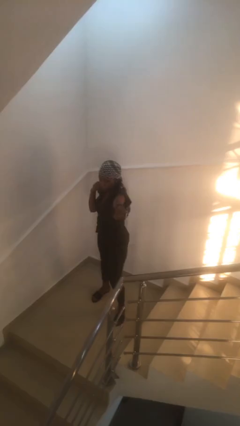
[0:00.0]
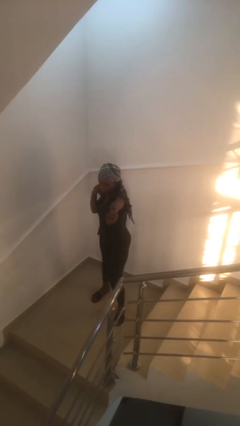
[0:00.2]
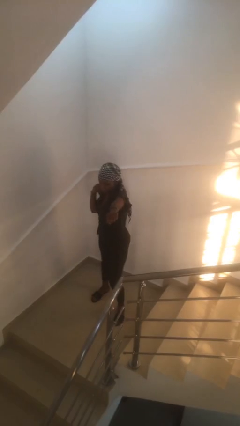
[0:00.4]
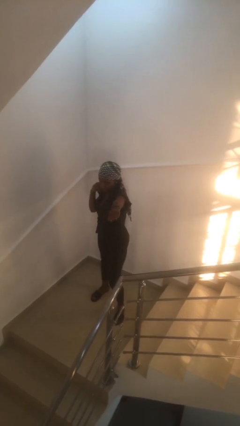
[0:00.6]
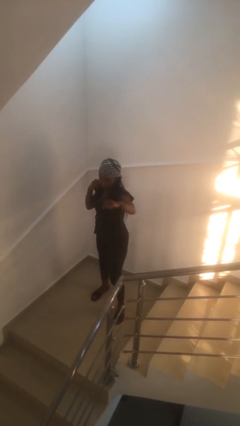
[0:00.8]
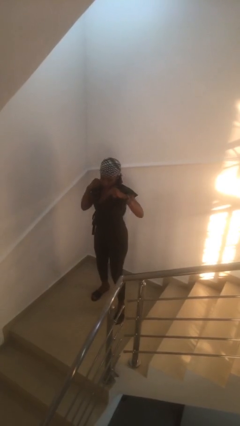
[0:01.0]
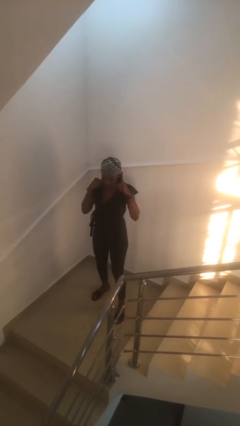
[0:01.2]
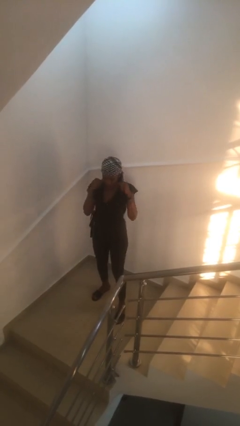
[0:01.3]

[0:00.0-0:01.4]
person punches

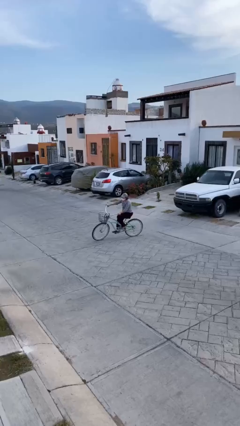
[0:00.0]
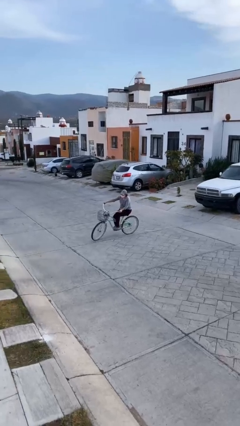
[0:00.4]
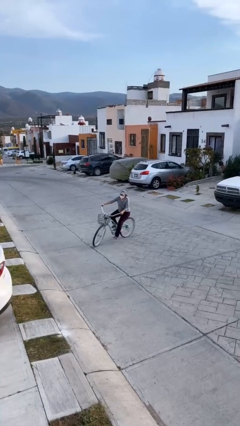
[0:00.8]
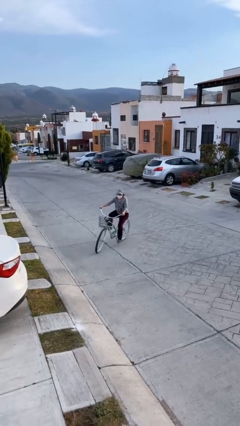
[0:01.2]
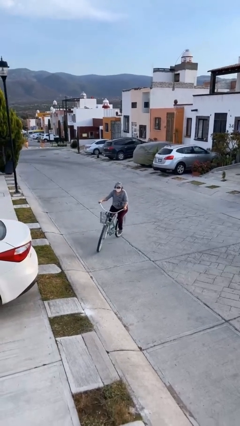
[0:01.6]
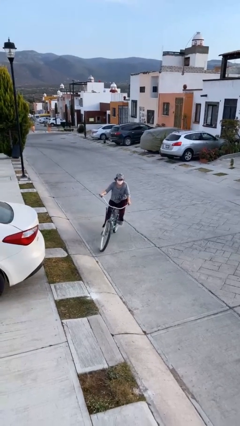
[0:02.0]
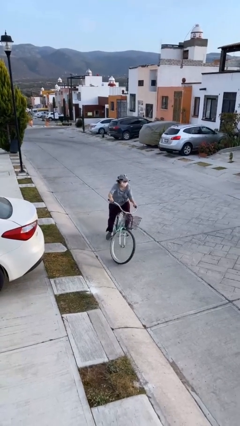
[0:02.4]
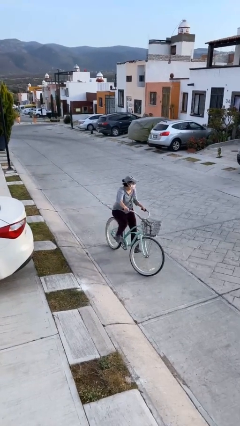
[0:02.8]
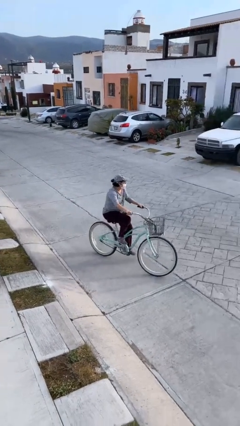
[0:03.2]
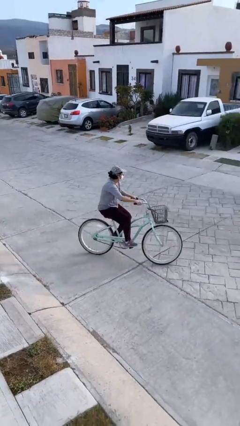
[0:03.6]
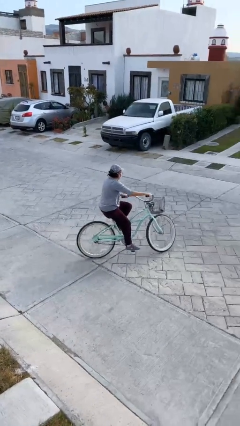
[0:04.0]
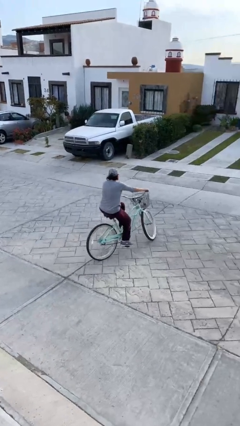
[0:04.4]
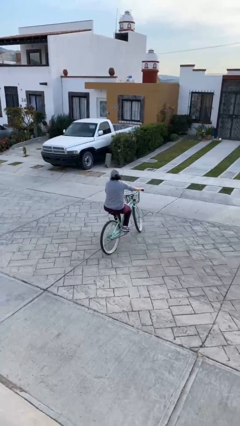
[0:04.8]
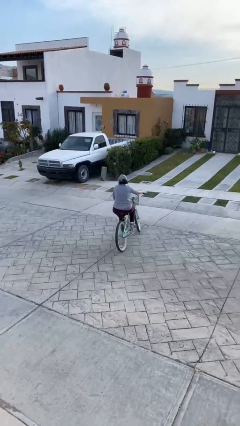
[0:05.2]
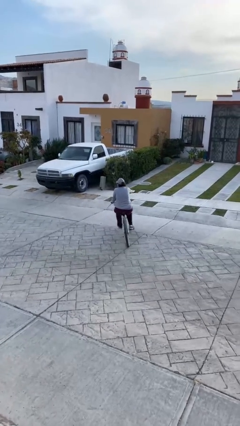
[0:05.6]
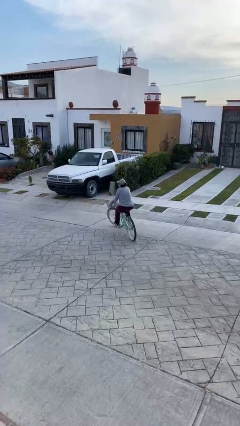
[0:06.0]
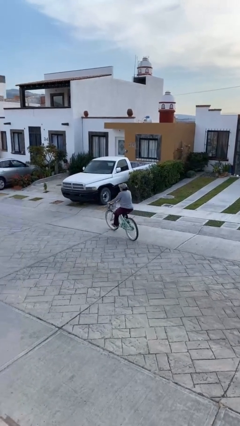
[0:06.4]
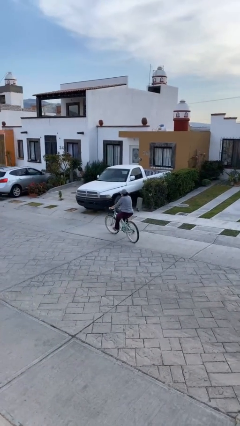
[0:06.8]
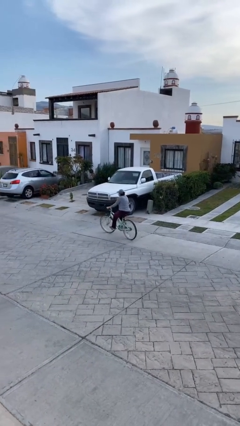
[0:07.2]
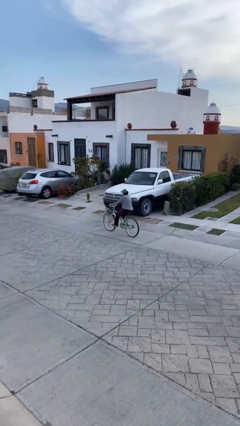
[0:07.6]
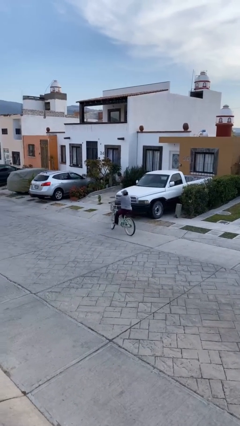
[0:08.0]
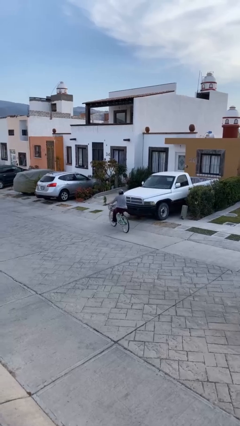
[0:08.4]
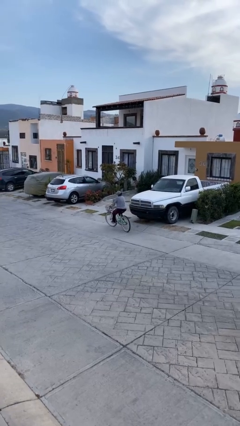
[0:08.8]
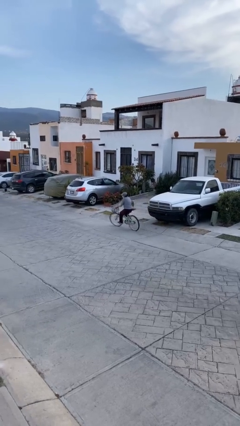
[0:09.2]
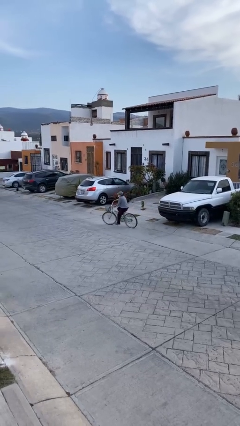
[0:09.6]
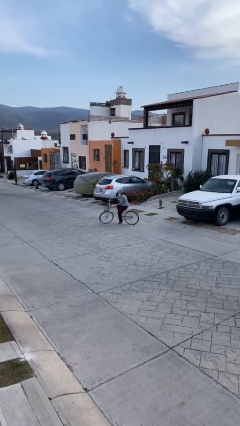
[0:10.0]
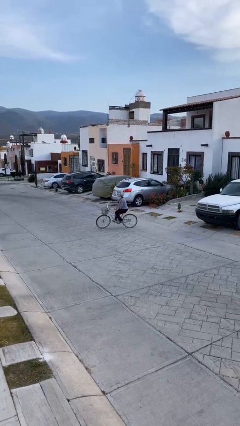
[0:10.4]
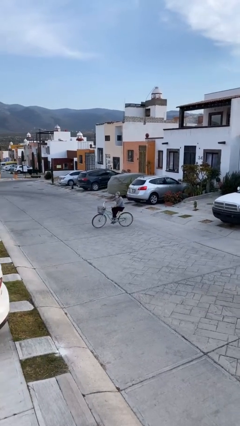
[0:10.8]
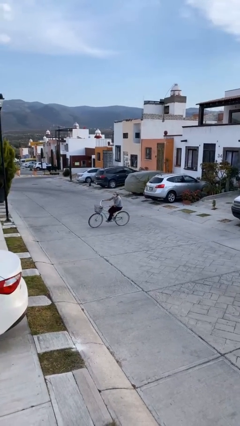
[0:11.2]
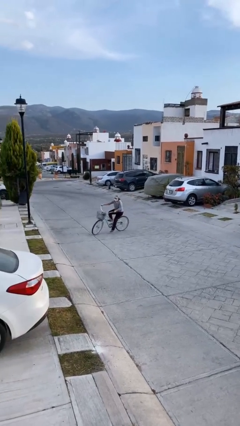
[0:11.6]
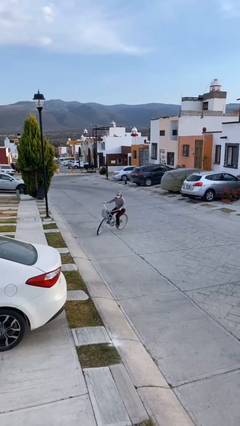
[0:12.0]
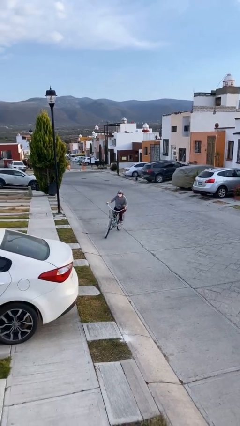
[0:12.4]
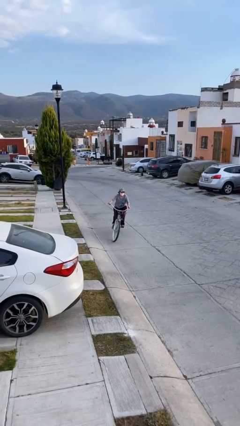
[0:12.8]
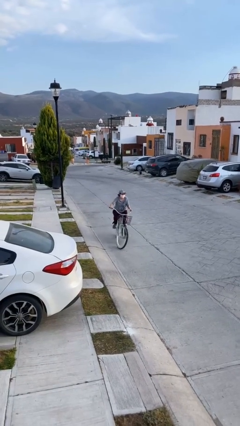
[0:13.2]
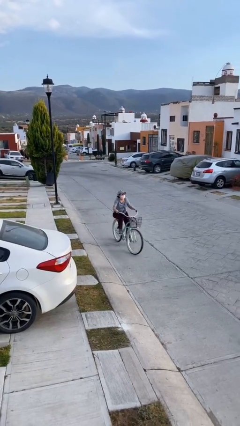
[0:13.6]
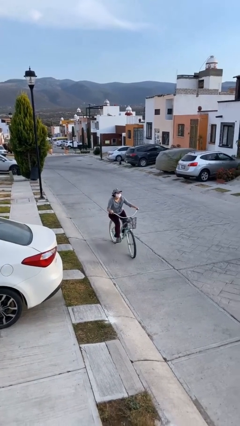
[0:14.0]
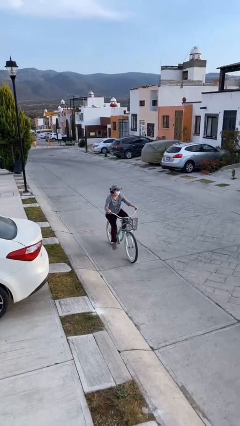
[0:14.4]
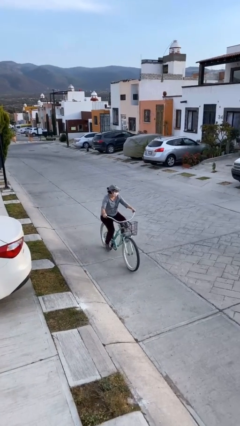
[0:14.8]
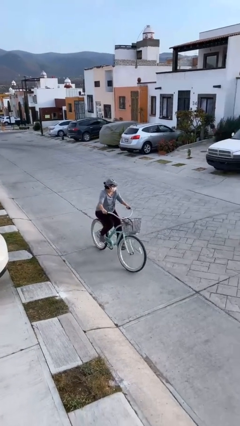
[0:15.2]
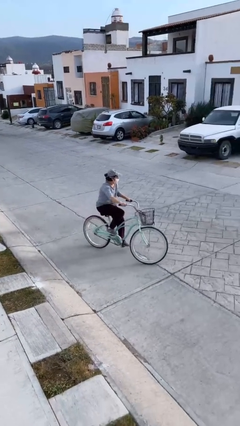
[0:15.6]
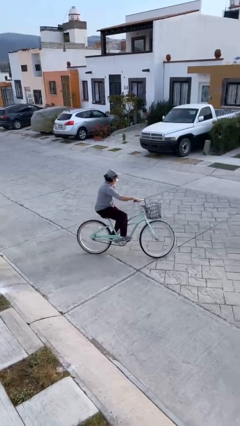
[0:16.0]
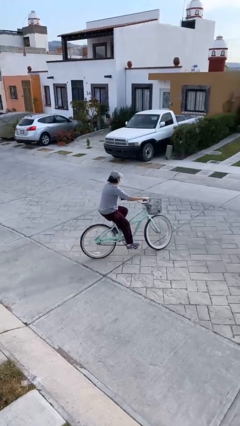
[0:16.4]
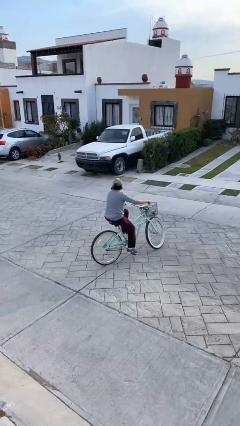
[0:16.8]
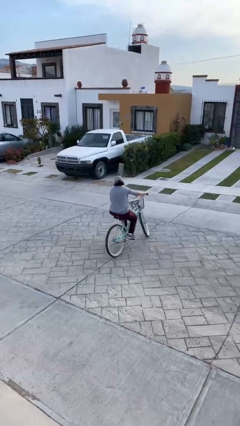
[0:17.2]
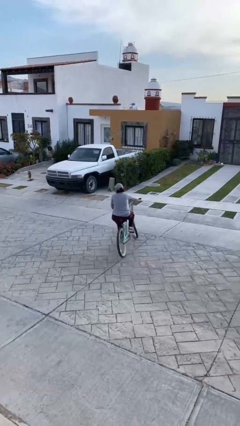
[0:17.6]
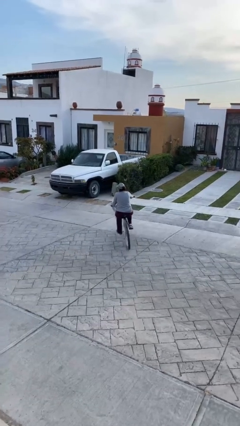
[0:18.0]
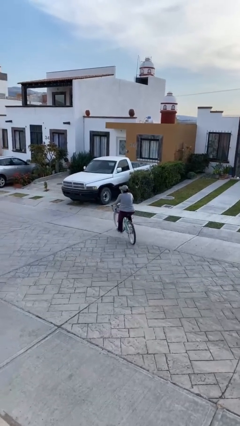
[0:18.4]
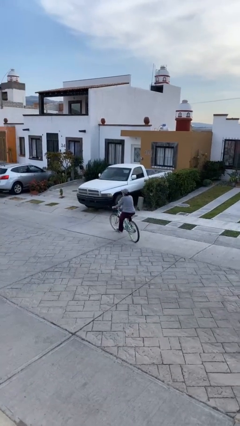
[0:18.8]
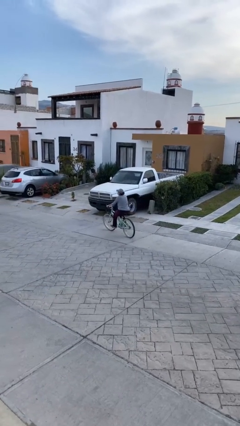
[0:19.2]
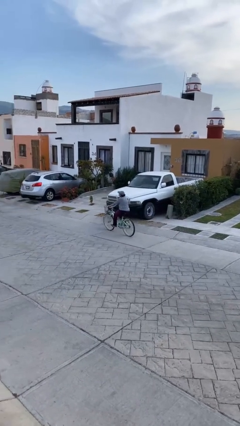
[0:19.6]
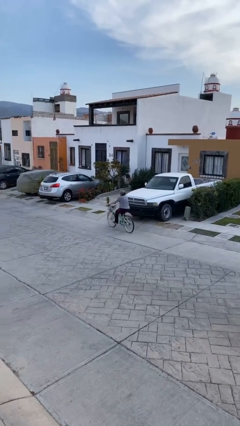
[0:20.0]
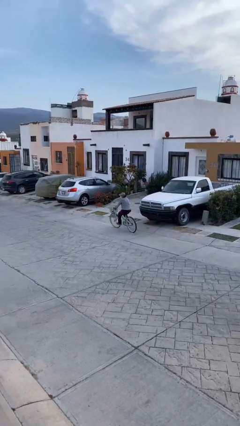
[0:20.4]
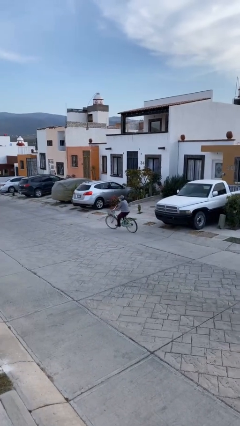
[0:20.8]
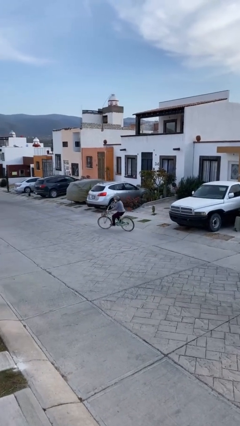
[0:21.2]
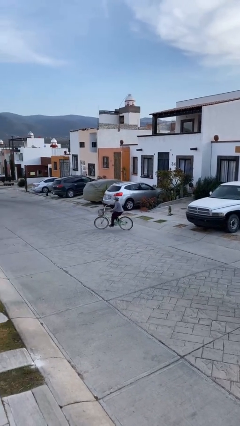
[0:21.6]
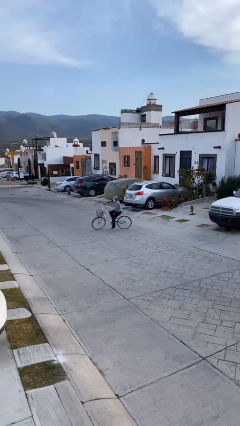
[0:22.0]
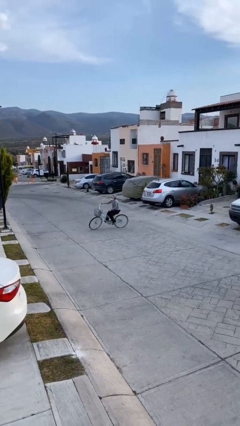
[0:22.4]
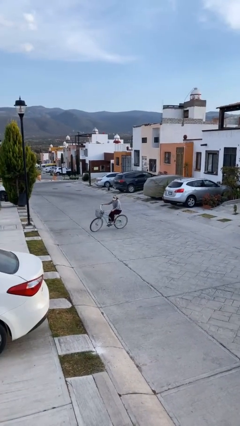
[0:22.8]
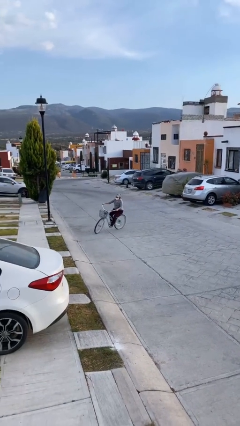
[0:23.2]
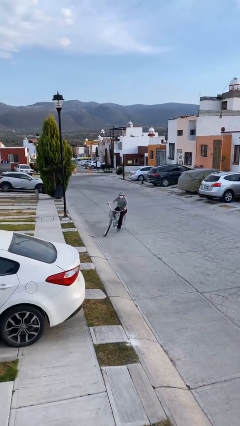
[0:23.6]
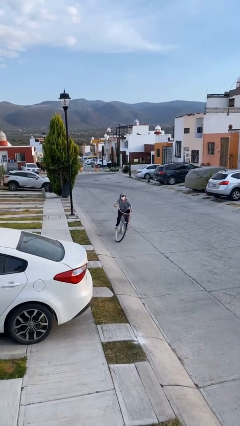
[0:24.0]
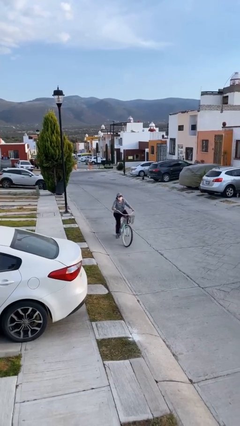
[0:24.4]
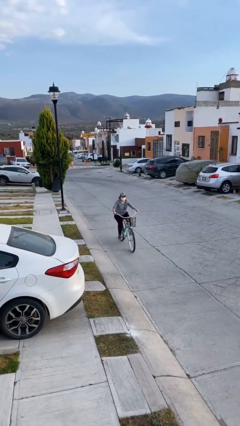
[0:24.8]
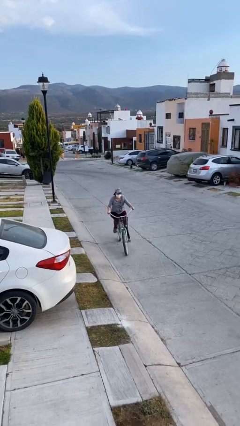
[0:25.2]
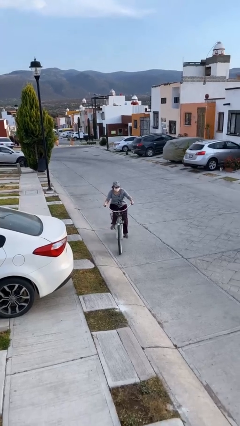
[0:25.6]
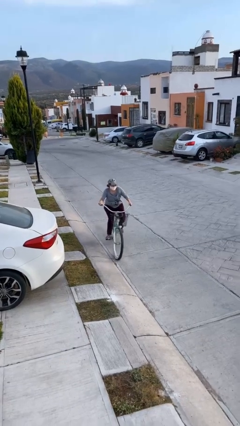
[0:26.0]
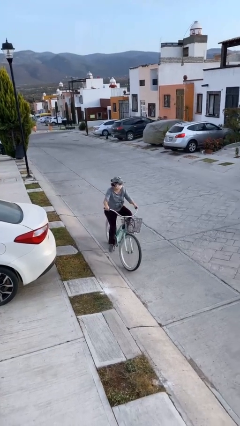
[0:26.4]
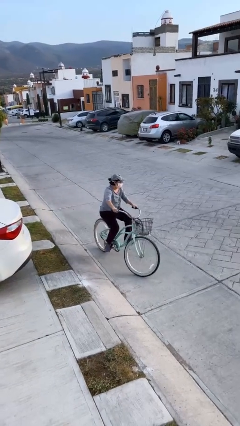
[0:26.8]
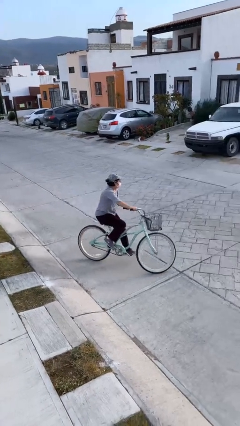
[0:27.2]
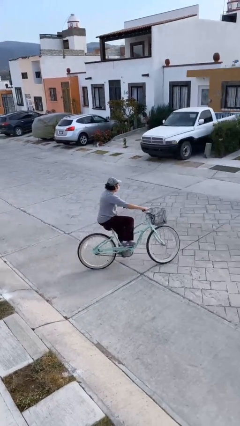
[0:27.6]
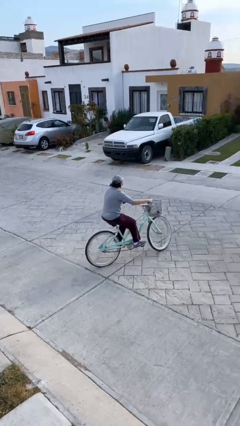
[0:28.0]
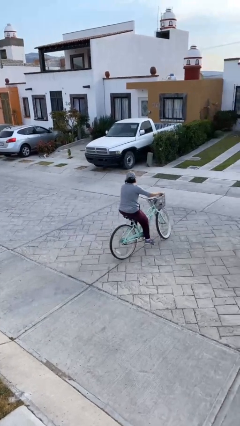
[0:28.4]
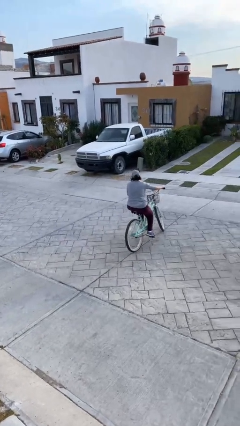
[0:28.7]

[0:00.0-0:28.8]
person rides bicycle

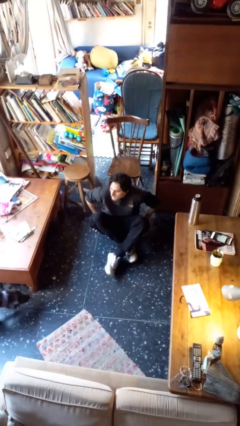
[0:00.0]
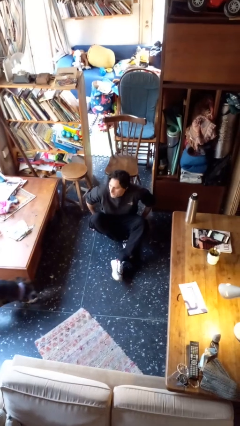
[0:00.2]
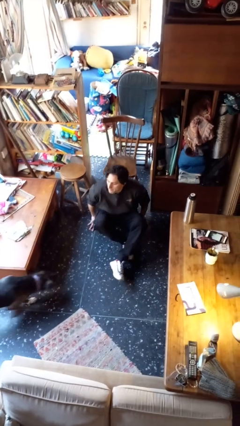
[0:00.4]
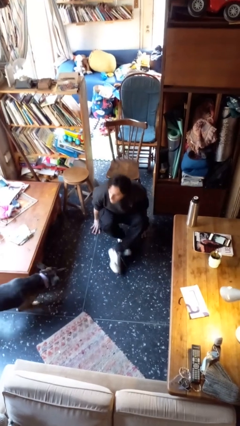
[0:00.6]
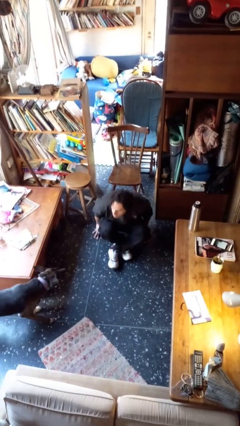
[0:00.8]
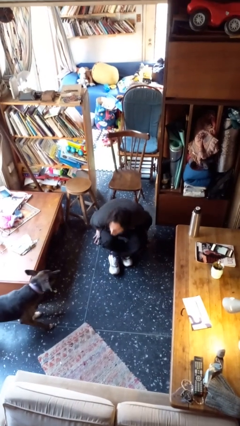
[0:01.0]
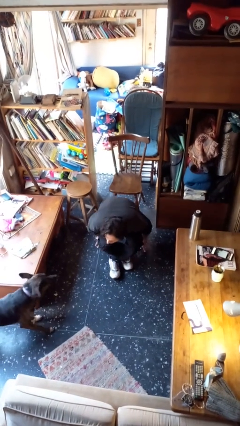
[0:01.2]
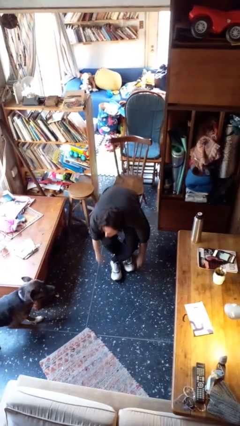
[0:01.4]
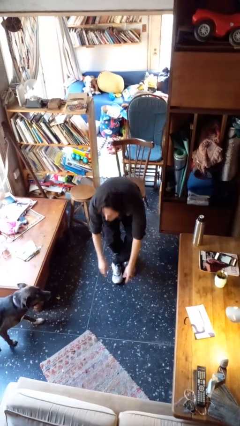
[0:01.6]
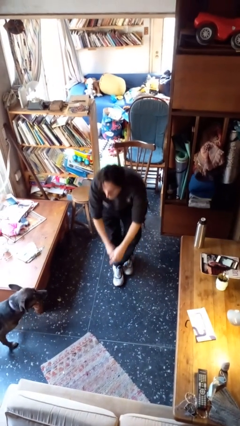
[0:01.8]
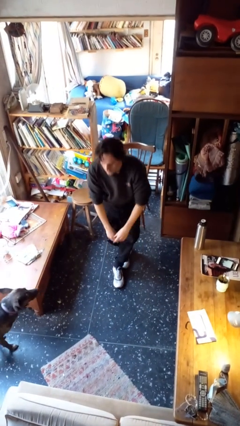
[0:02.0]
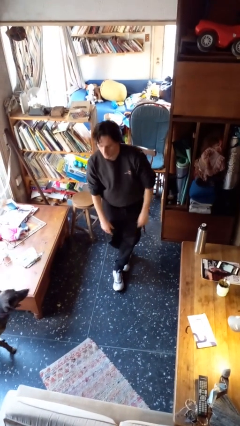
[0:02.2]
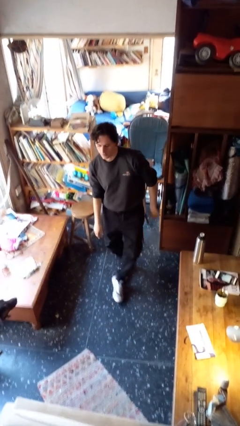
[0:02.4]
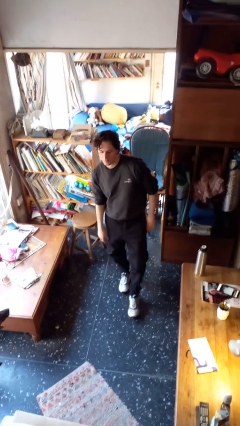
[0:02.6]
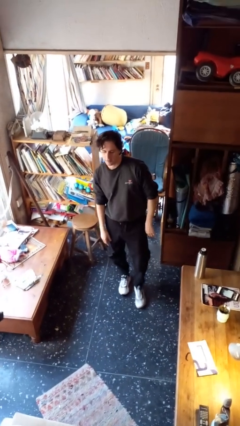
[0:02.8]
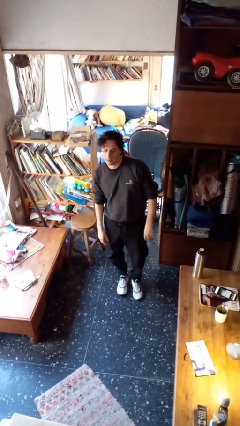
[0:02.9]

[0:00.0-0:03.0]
person stands up from floor
